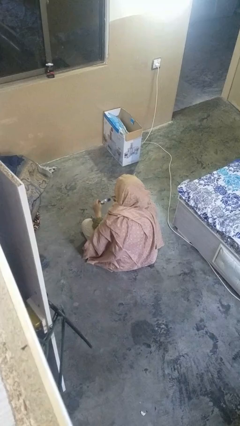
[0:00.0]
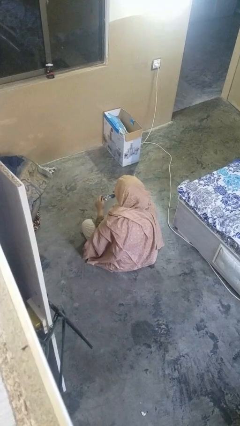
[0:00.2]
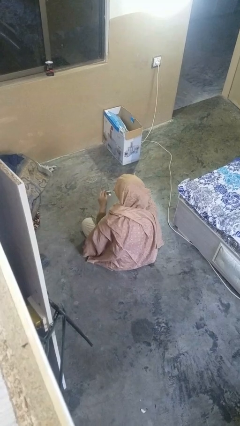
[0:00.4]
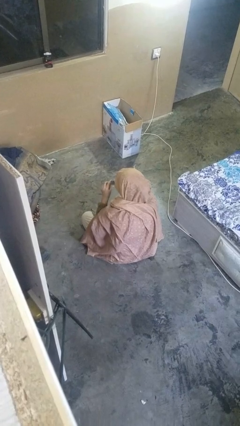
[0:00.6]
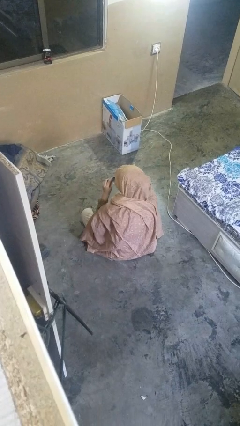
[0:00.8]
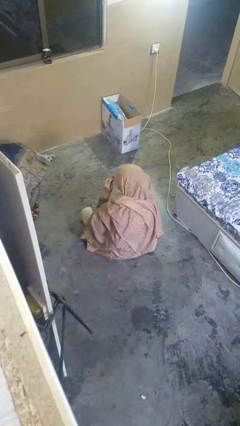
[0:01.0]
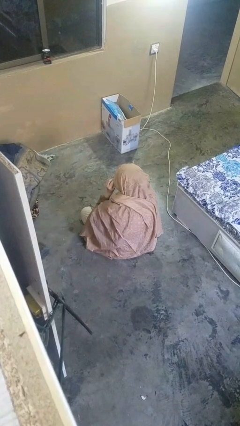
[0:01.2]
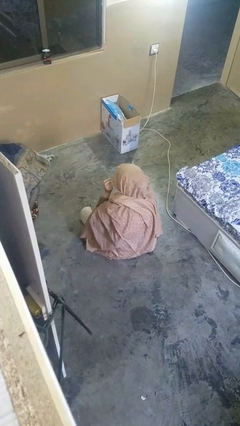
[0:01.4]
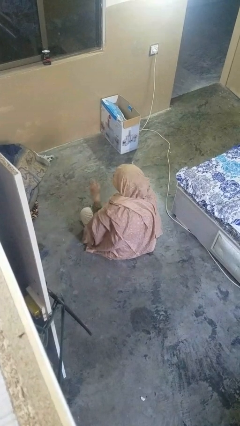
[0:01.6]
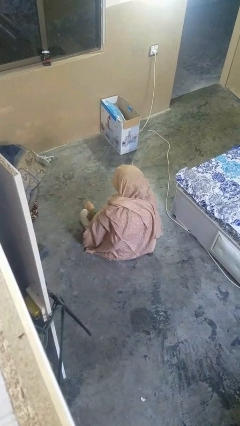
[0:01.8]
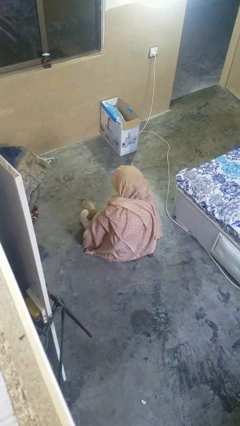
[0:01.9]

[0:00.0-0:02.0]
person puts on glasses

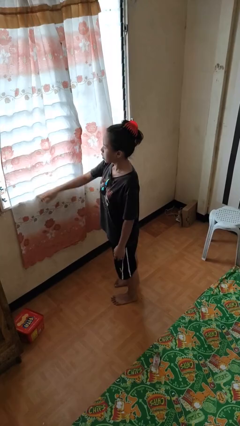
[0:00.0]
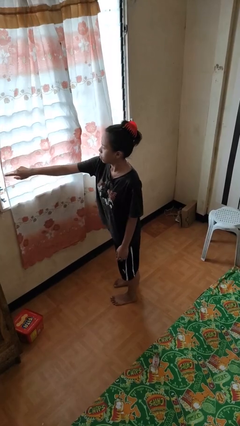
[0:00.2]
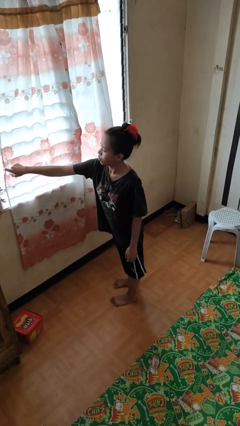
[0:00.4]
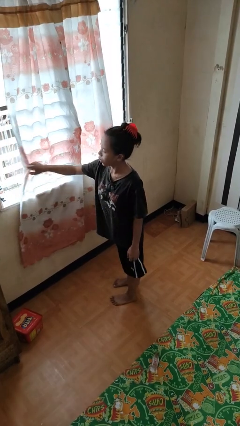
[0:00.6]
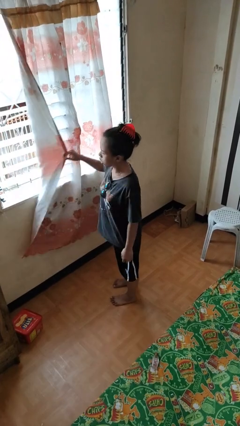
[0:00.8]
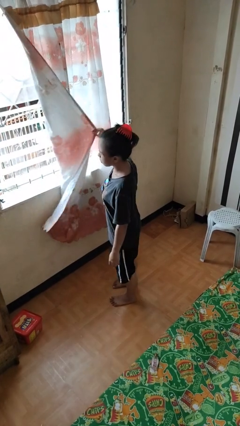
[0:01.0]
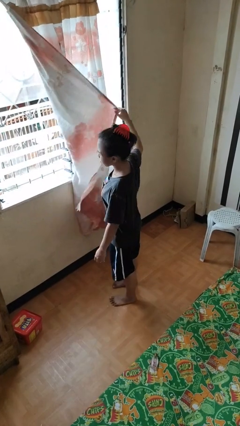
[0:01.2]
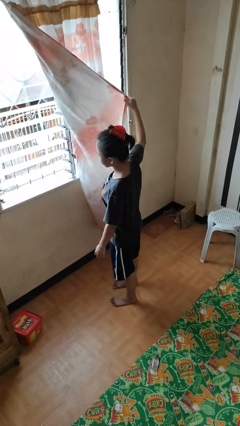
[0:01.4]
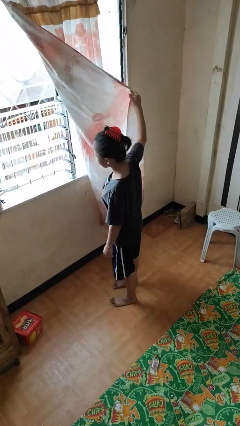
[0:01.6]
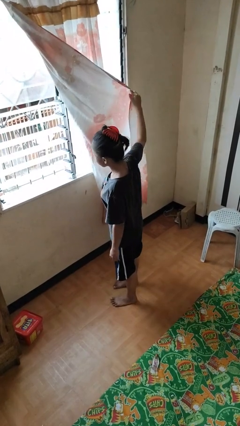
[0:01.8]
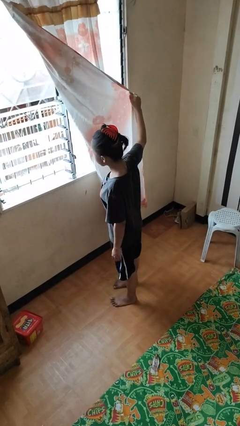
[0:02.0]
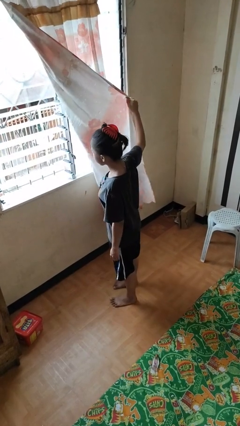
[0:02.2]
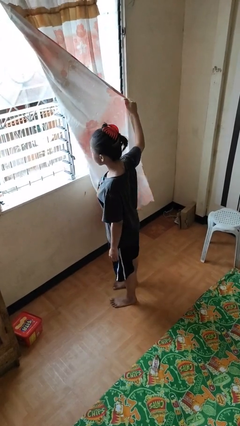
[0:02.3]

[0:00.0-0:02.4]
person opens curtains

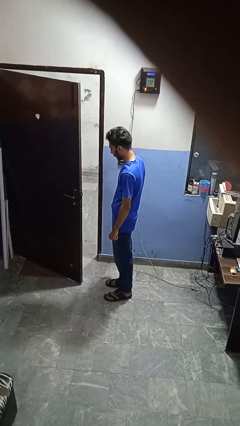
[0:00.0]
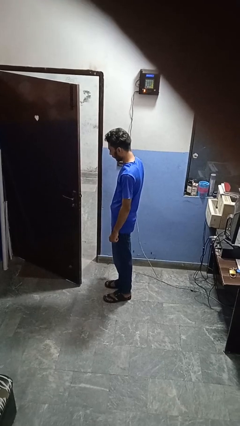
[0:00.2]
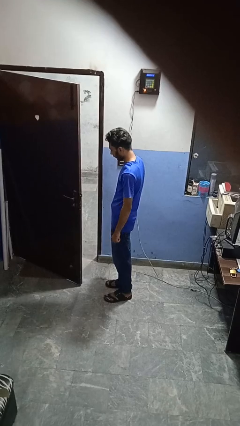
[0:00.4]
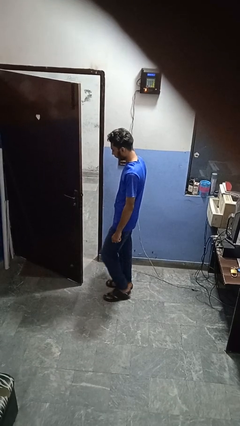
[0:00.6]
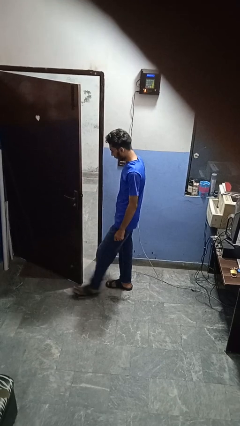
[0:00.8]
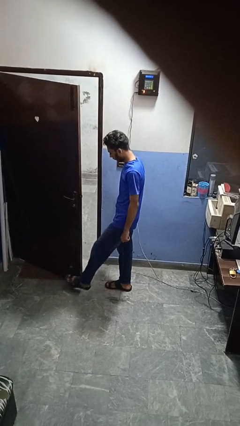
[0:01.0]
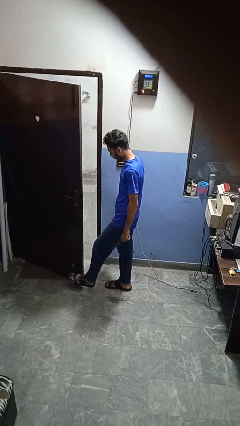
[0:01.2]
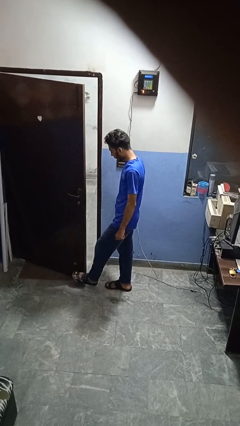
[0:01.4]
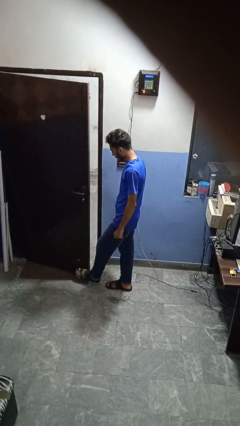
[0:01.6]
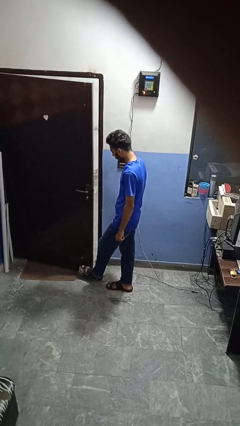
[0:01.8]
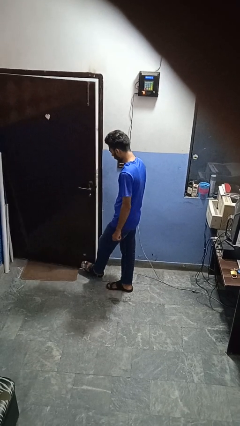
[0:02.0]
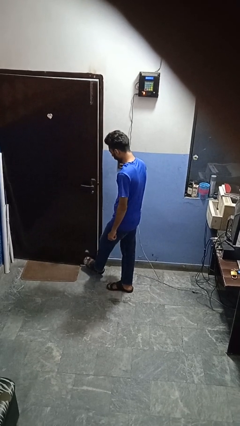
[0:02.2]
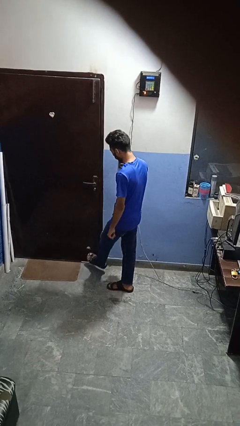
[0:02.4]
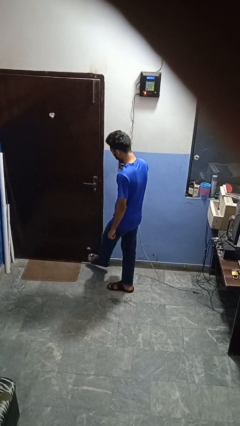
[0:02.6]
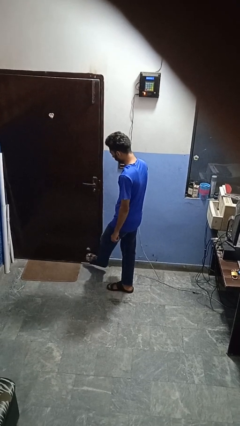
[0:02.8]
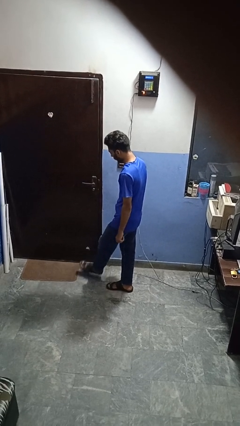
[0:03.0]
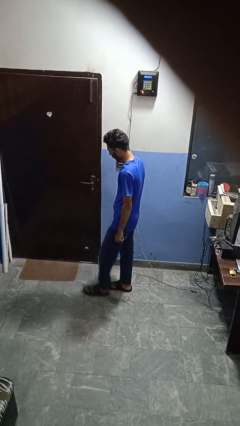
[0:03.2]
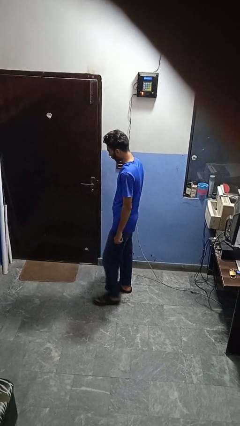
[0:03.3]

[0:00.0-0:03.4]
person closes door with foot

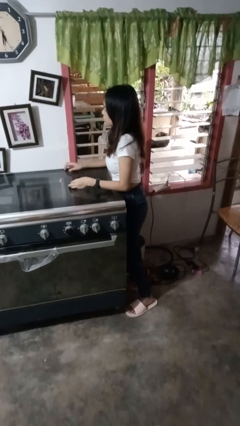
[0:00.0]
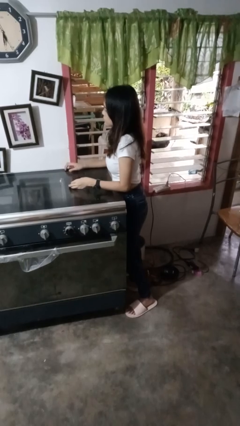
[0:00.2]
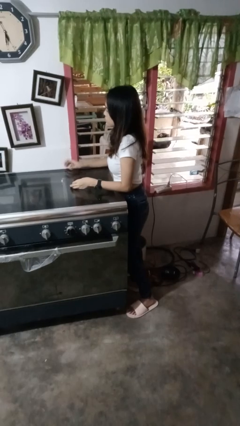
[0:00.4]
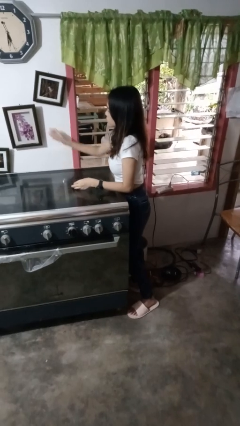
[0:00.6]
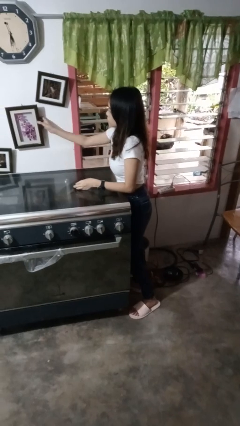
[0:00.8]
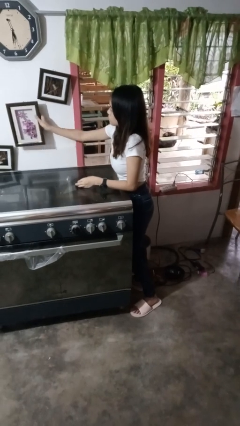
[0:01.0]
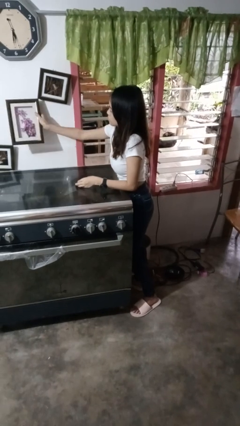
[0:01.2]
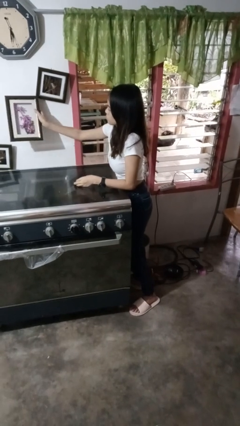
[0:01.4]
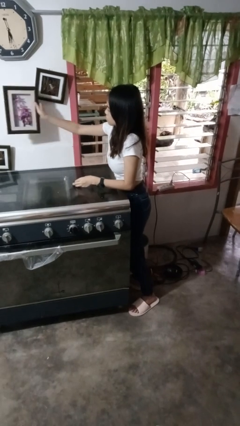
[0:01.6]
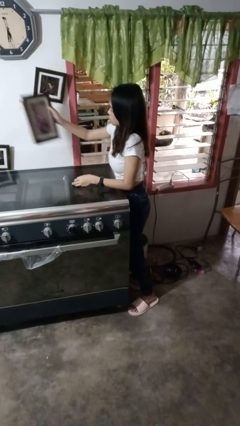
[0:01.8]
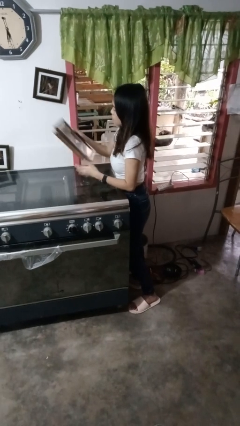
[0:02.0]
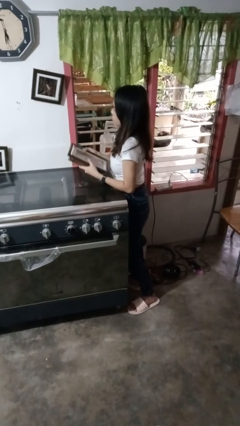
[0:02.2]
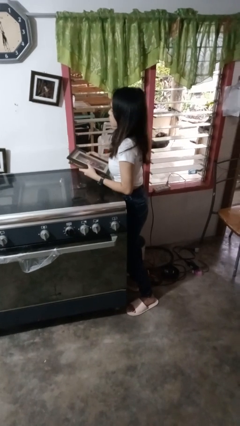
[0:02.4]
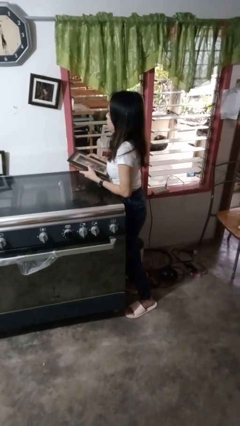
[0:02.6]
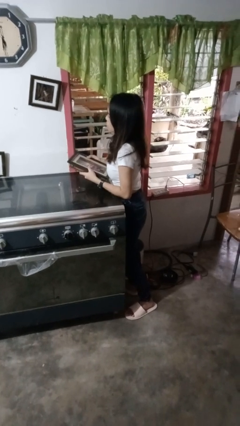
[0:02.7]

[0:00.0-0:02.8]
person takes down picture frame

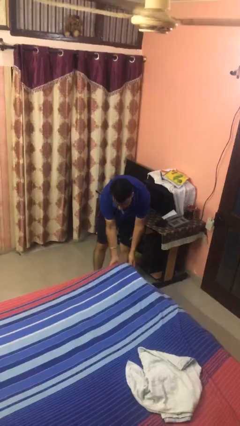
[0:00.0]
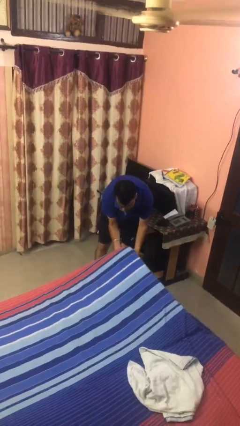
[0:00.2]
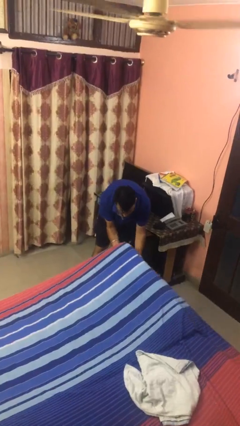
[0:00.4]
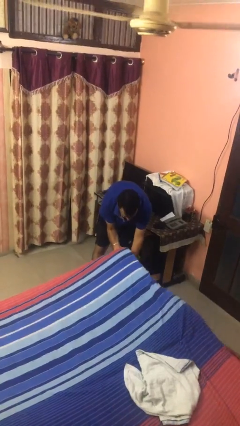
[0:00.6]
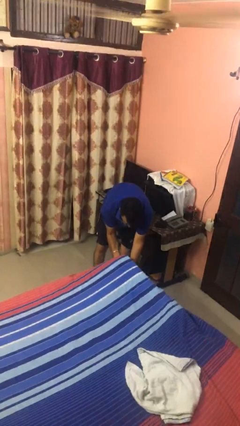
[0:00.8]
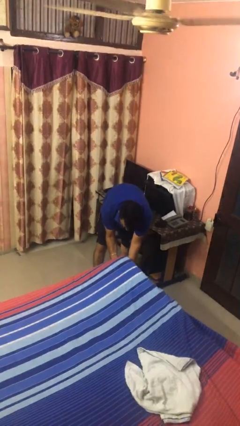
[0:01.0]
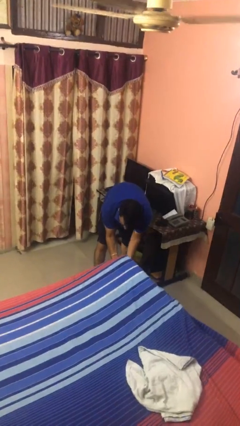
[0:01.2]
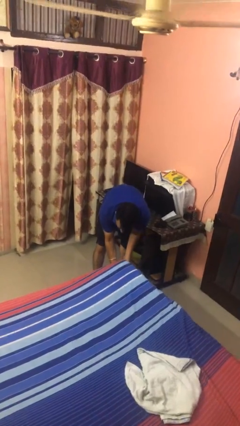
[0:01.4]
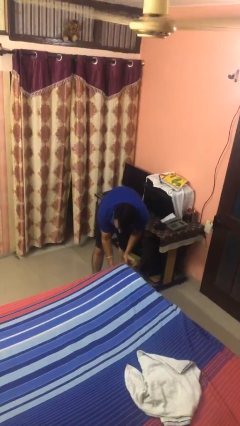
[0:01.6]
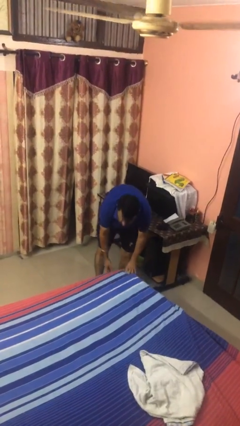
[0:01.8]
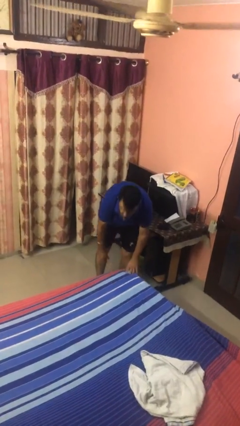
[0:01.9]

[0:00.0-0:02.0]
person makes bed

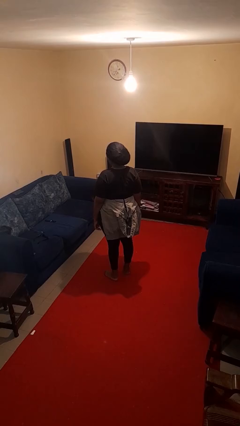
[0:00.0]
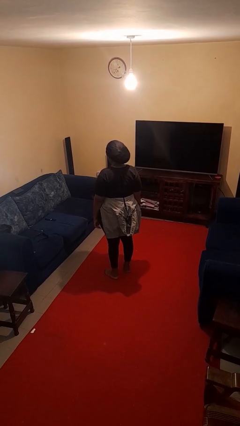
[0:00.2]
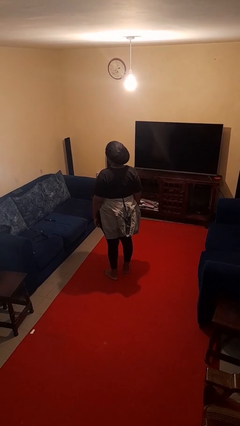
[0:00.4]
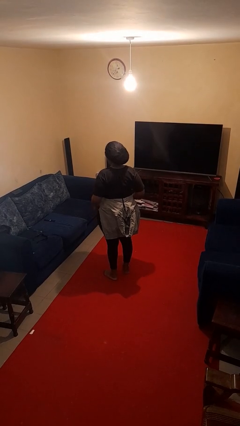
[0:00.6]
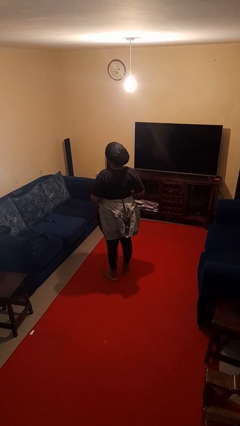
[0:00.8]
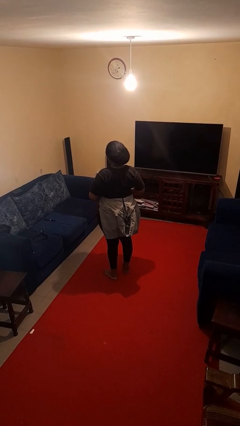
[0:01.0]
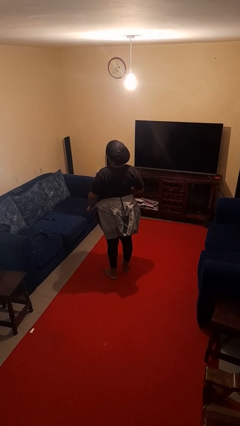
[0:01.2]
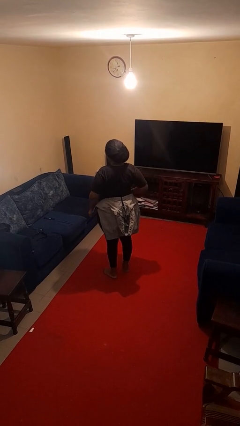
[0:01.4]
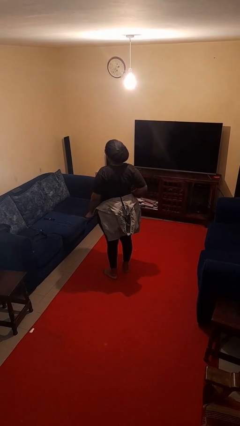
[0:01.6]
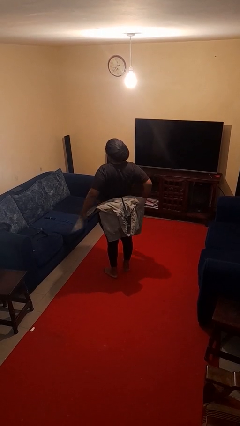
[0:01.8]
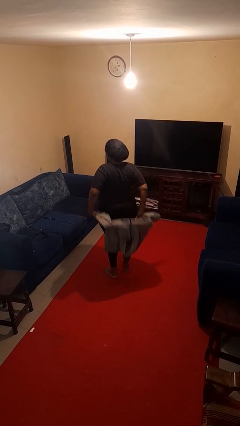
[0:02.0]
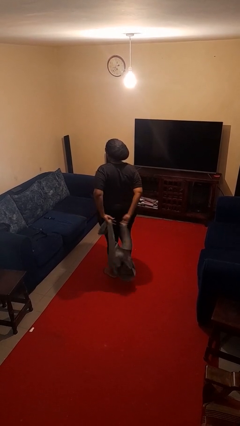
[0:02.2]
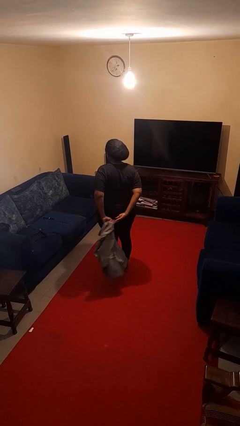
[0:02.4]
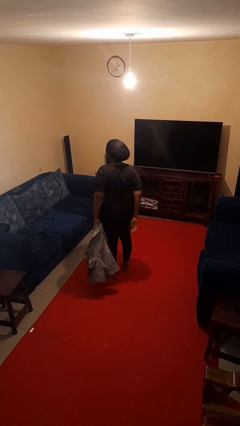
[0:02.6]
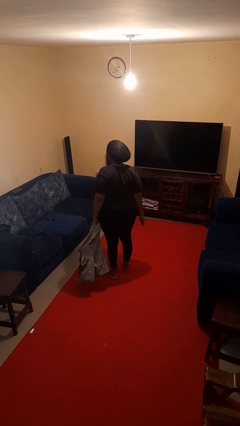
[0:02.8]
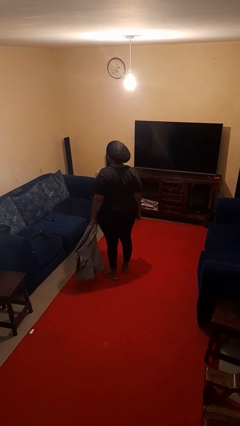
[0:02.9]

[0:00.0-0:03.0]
person unties jacket around waist

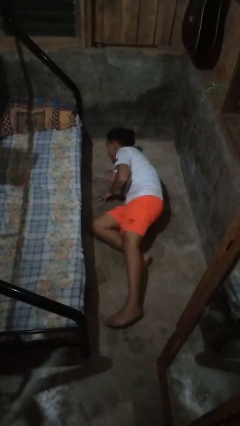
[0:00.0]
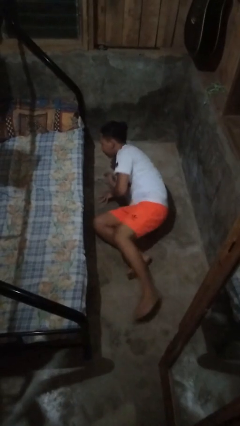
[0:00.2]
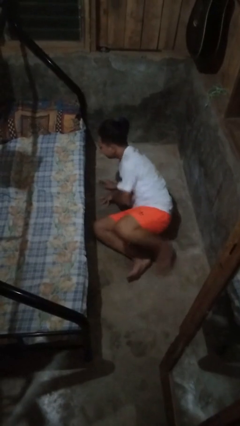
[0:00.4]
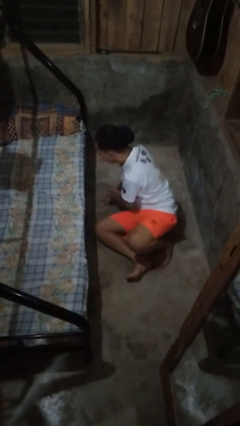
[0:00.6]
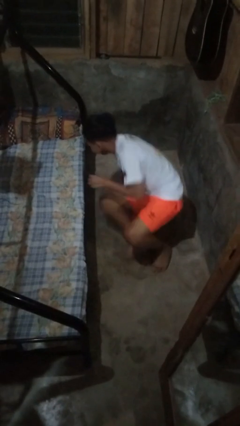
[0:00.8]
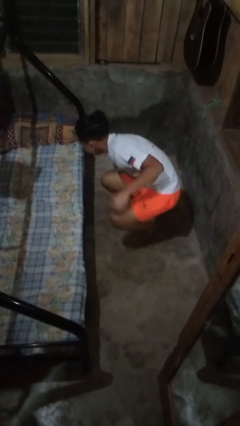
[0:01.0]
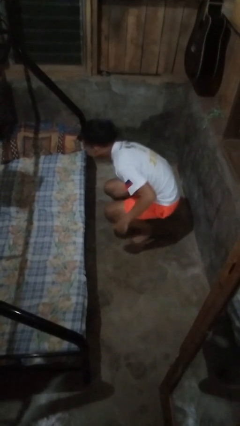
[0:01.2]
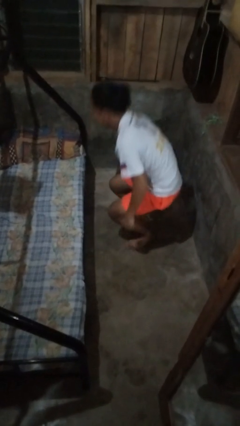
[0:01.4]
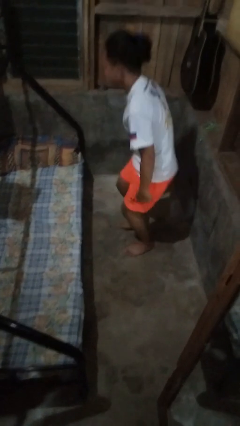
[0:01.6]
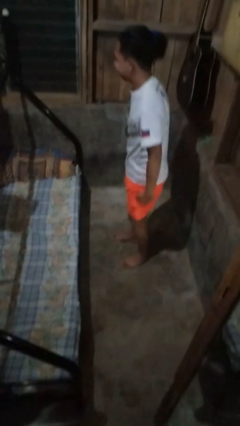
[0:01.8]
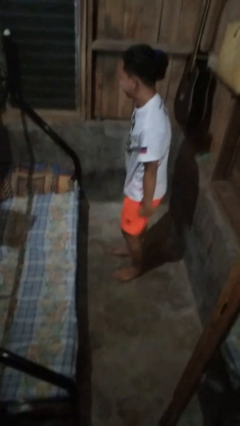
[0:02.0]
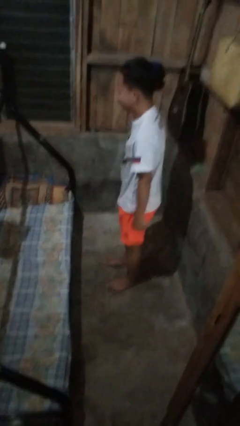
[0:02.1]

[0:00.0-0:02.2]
person stands up from floor
